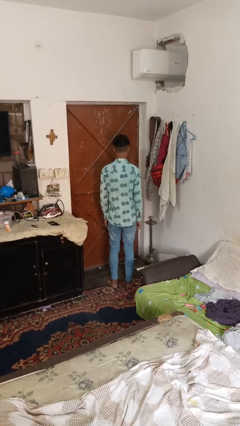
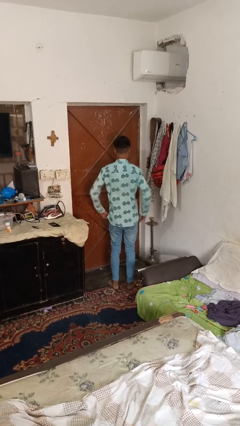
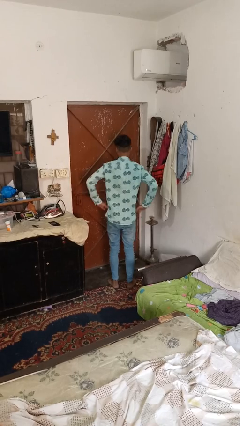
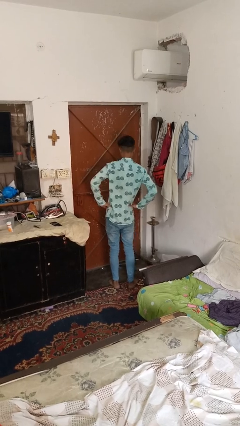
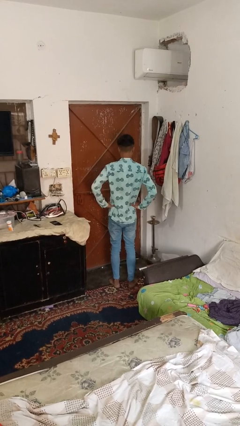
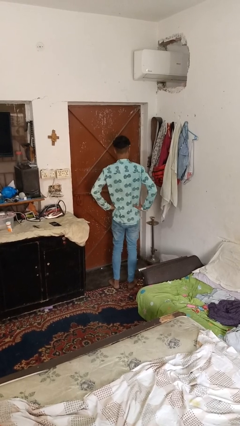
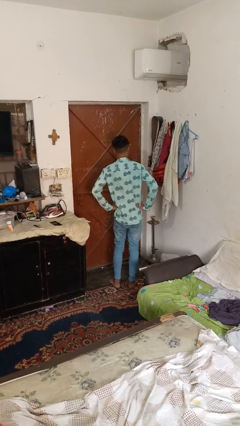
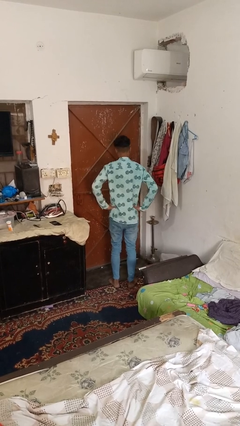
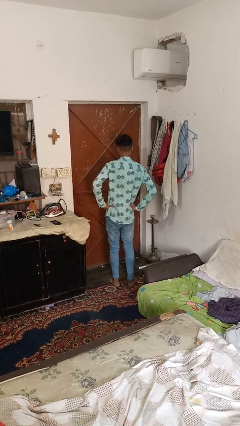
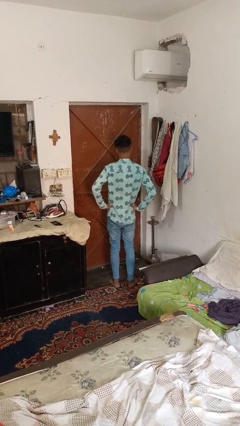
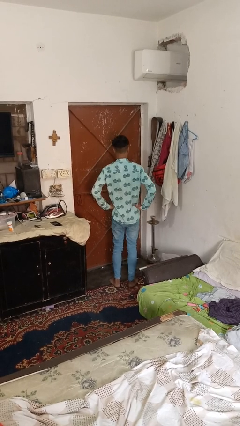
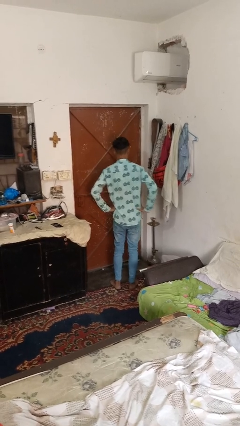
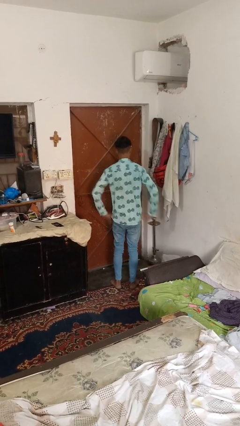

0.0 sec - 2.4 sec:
person wiggles hips

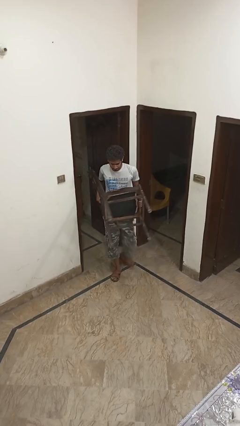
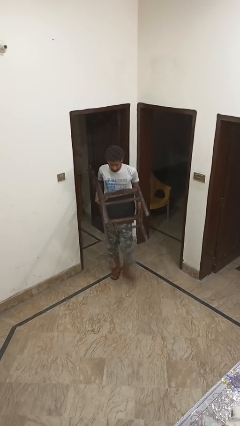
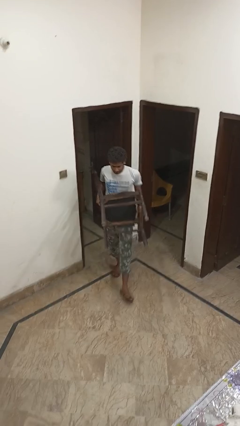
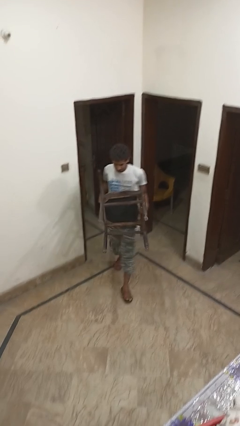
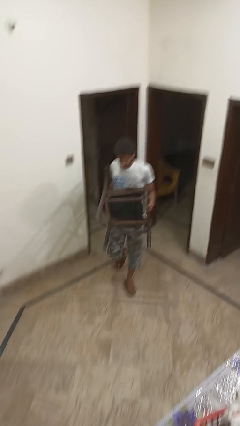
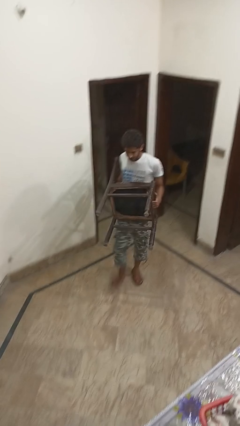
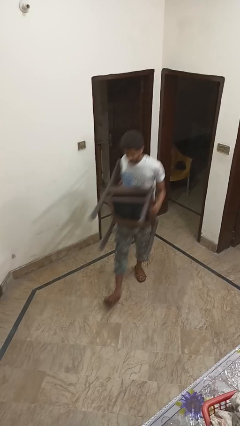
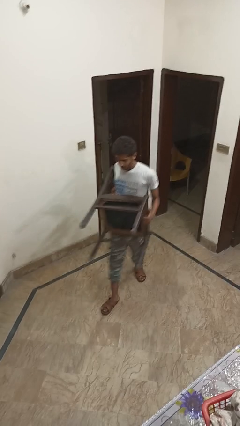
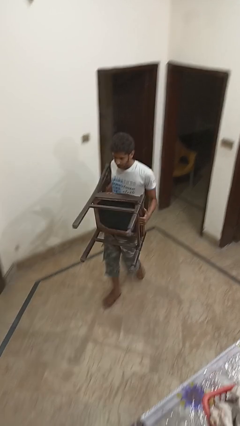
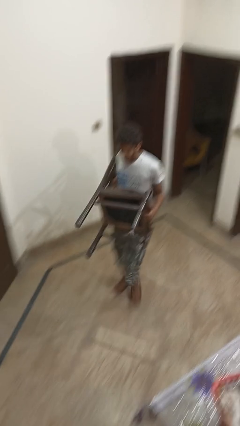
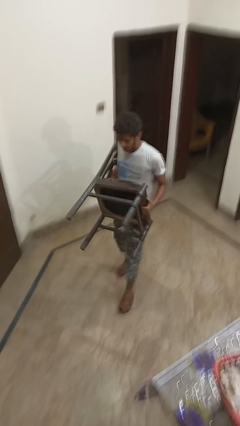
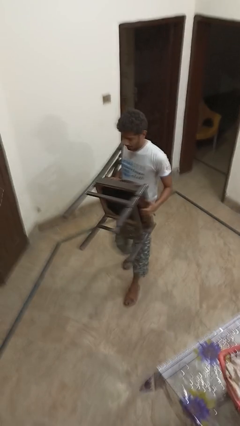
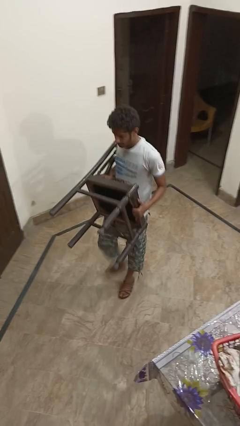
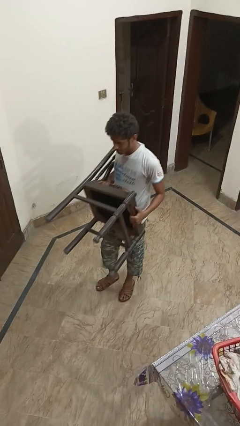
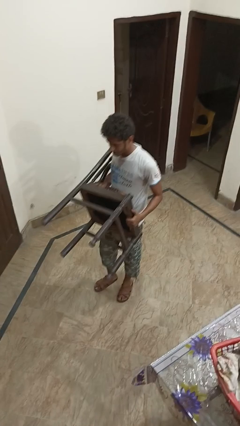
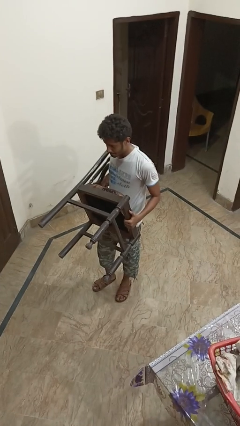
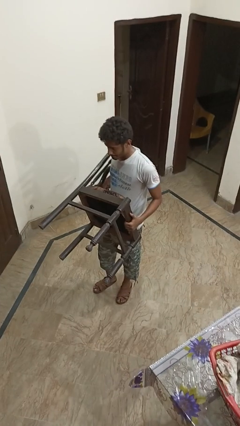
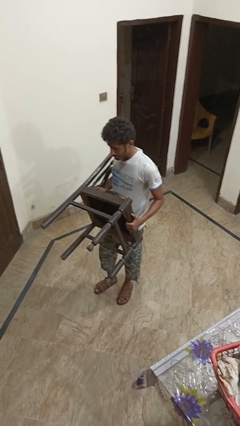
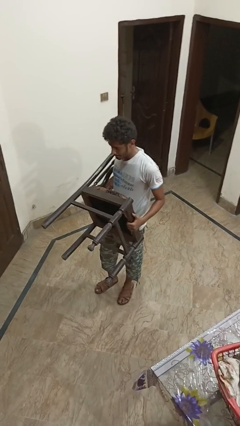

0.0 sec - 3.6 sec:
person carries furniture

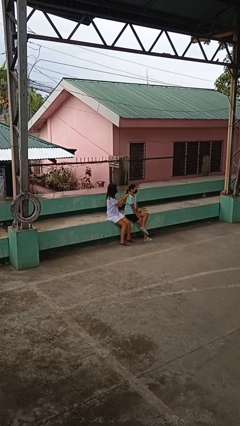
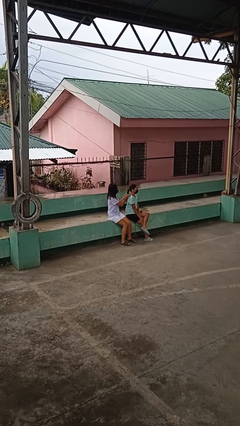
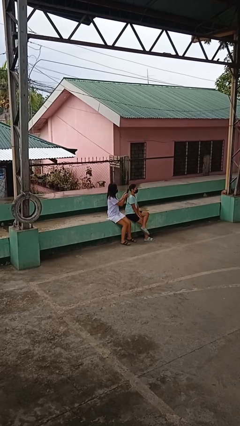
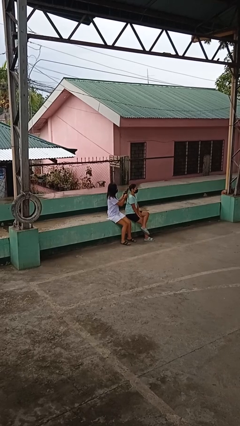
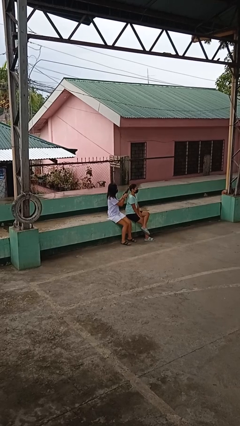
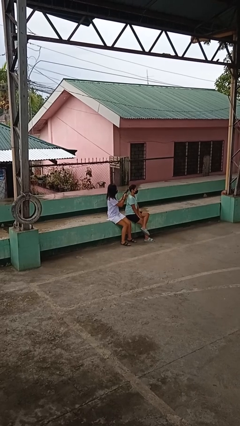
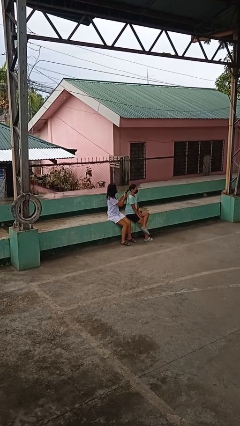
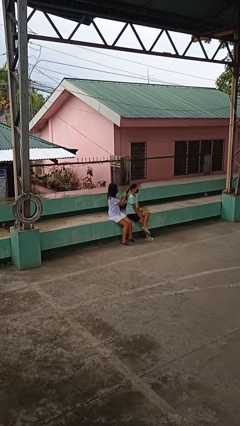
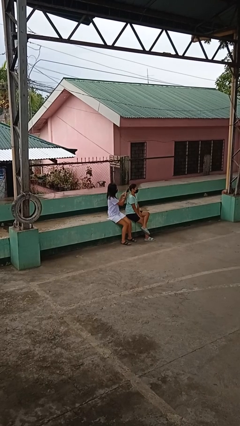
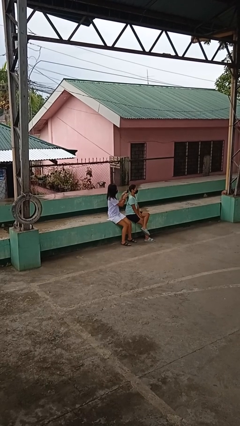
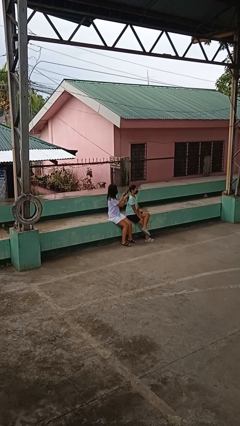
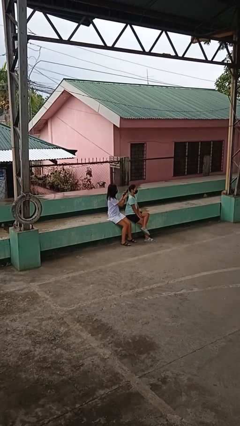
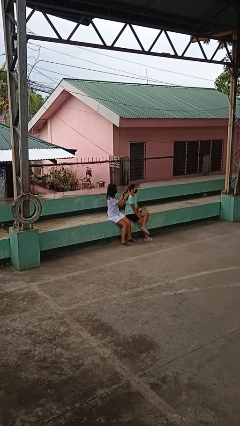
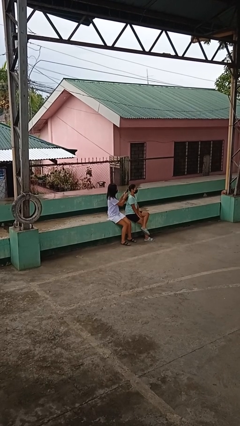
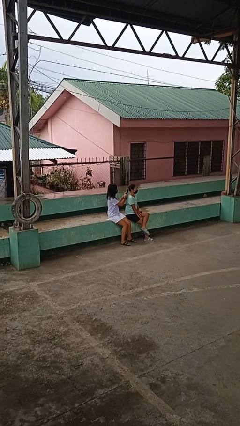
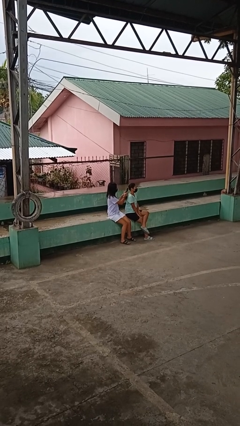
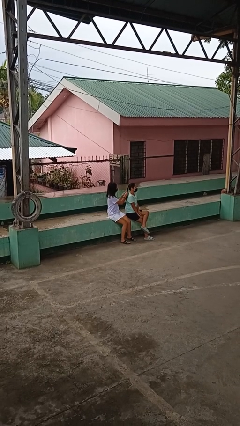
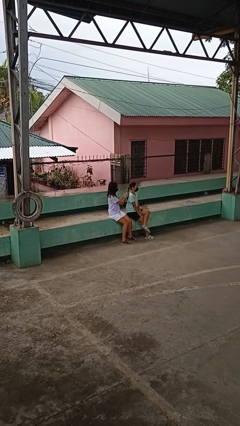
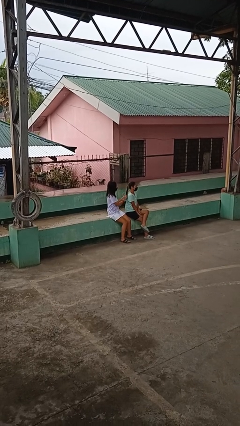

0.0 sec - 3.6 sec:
person braids hair of person

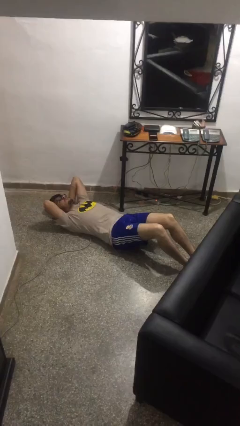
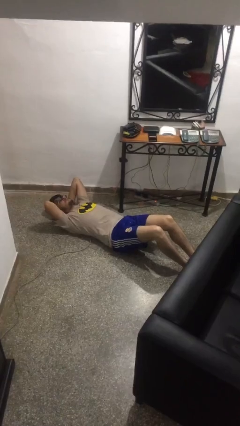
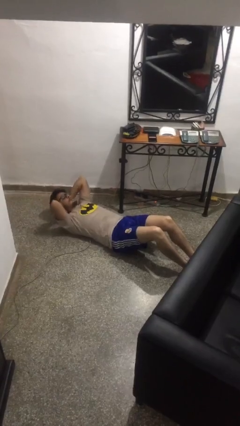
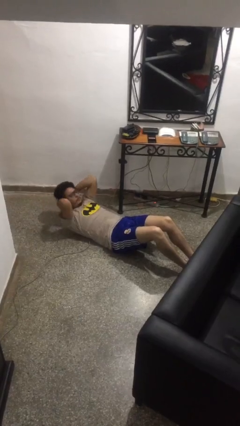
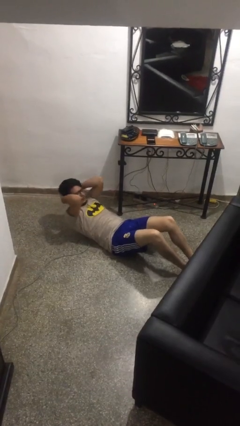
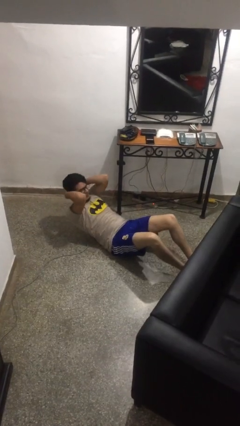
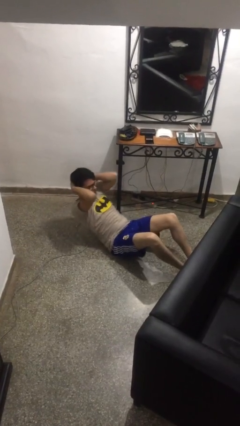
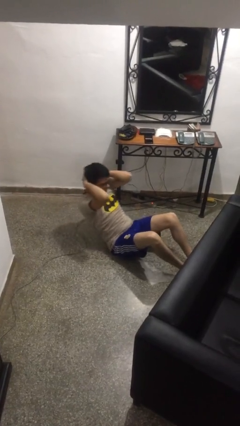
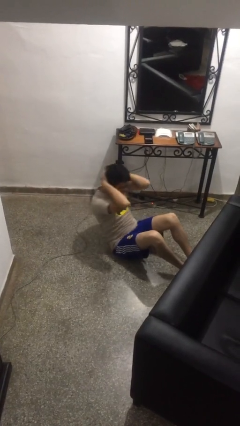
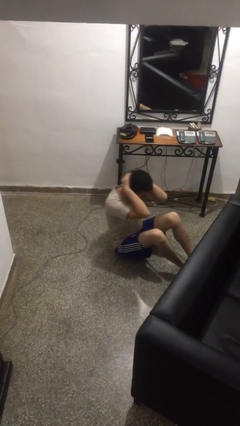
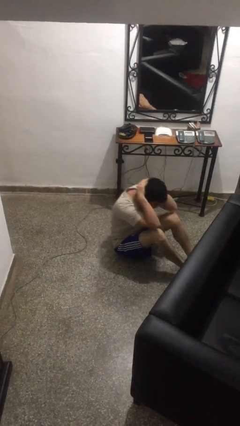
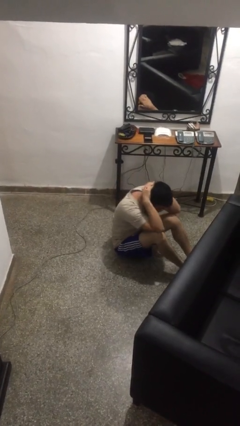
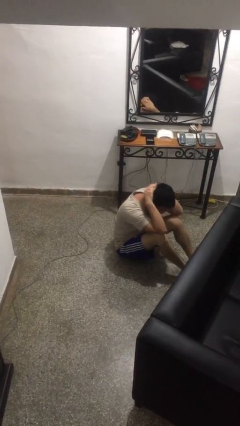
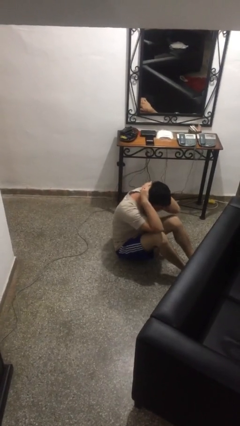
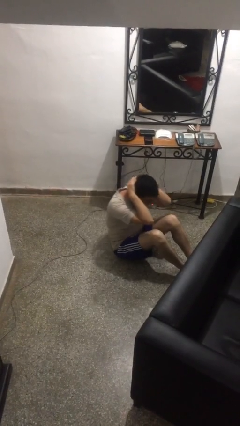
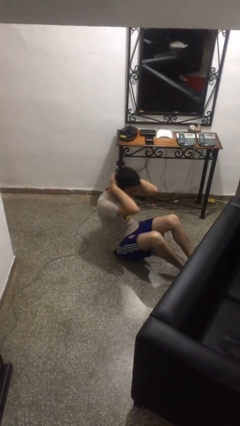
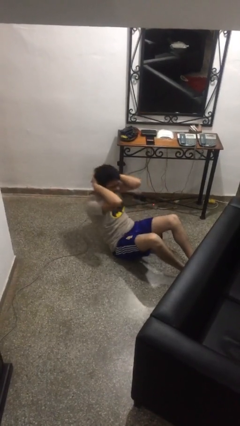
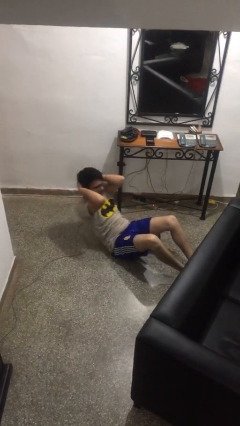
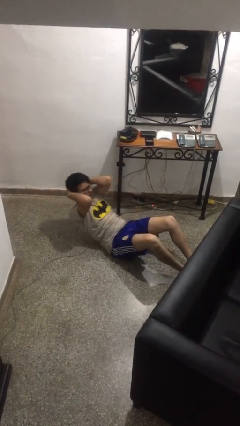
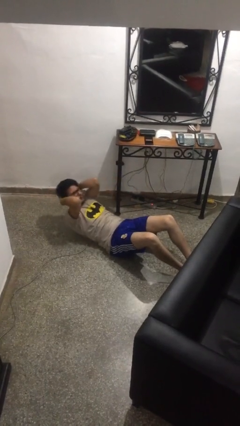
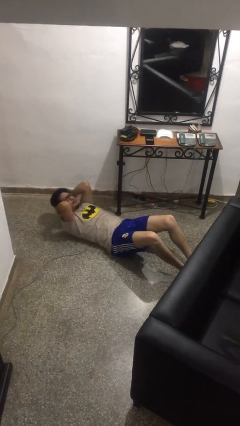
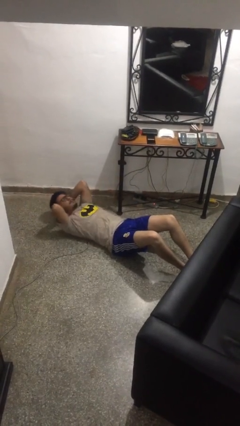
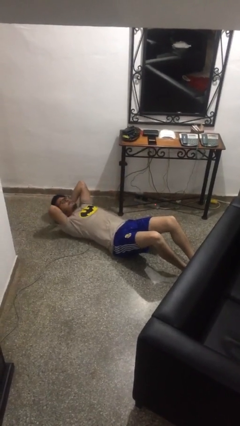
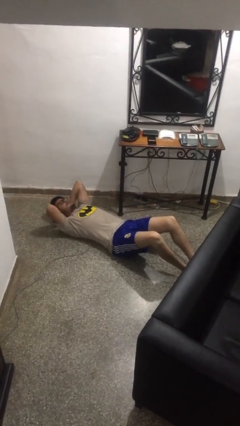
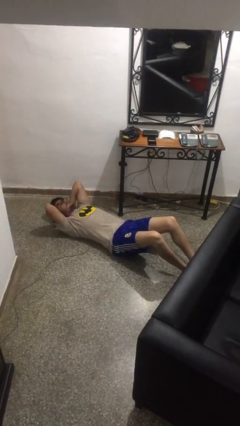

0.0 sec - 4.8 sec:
person exercises with situp

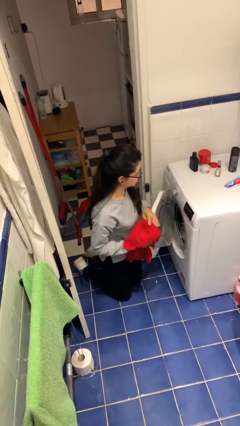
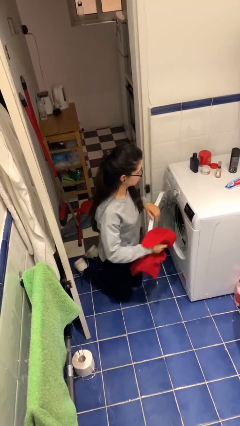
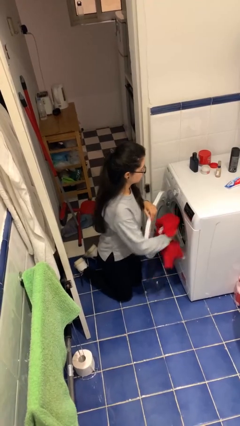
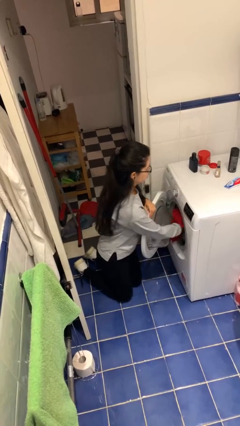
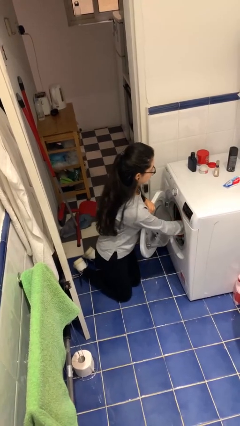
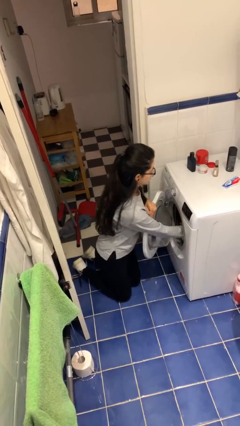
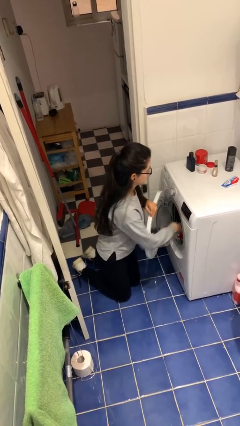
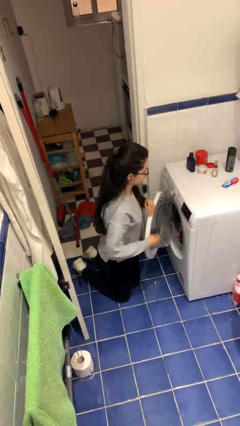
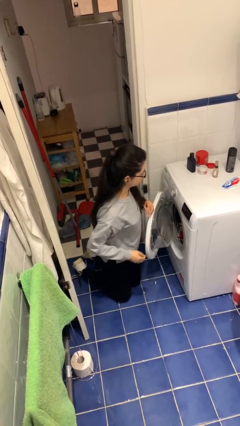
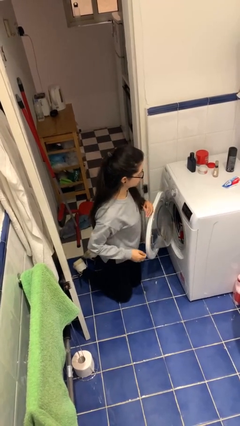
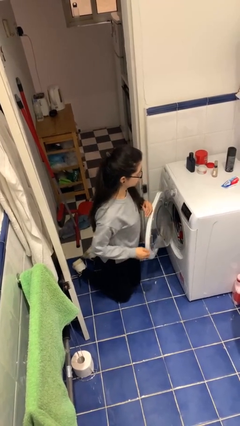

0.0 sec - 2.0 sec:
person loads dryer

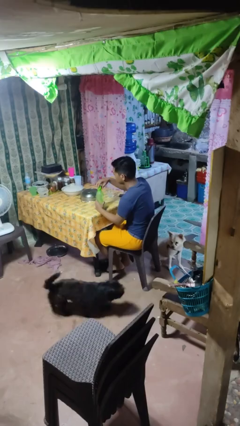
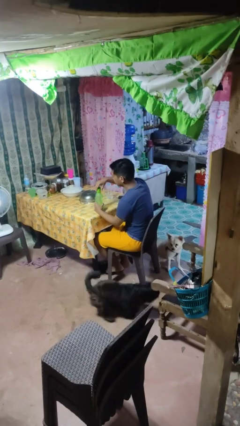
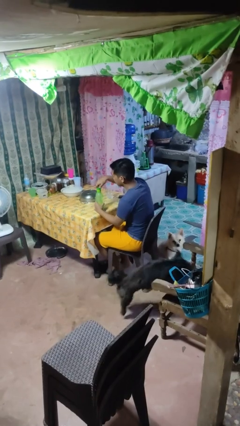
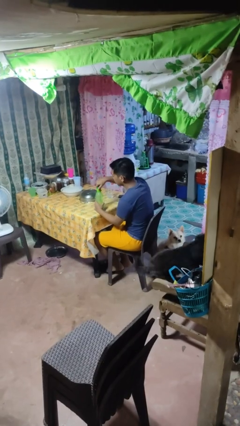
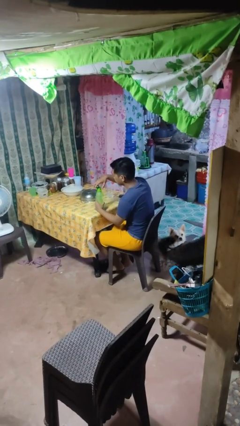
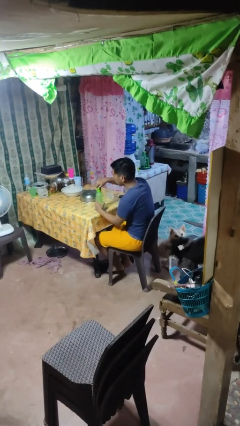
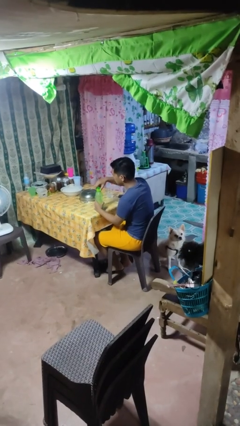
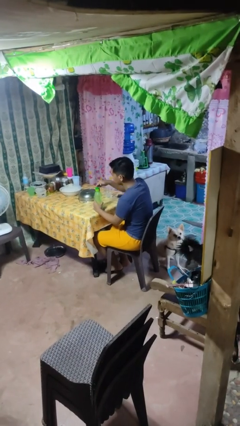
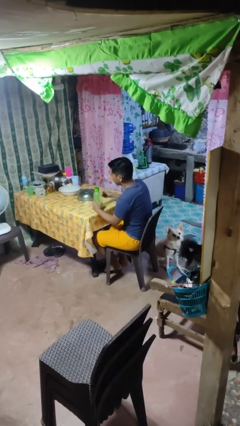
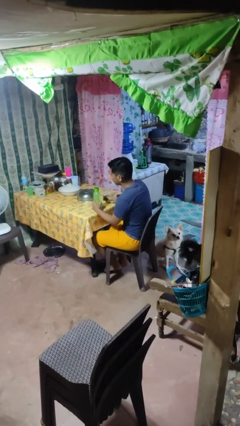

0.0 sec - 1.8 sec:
person screws lid to bottle
